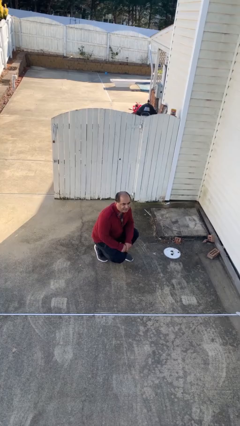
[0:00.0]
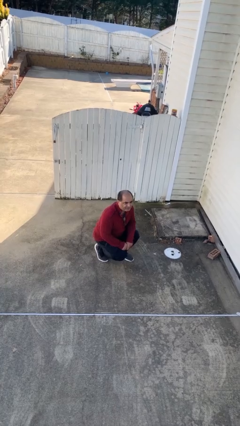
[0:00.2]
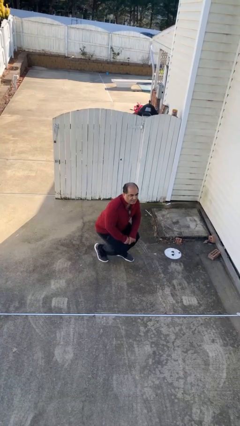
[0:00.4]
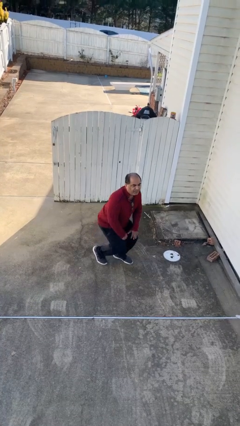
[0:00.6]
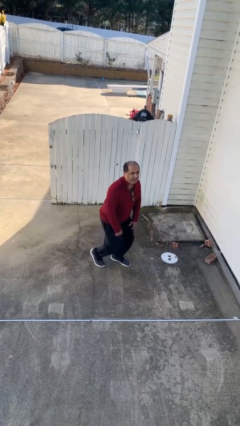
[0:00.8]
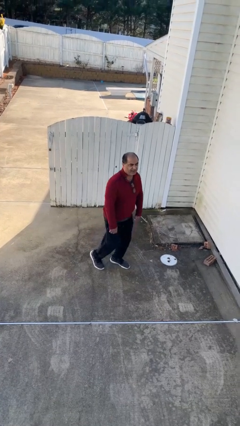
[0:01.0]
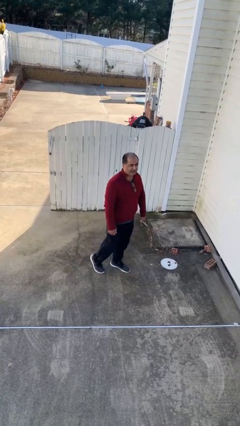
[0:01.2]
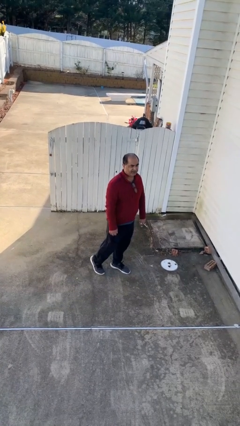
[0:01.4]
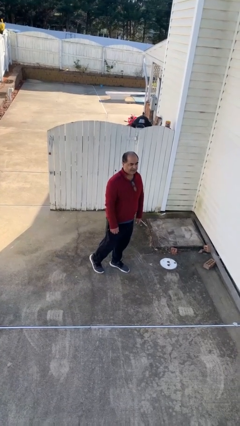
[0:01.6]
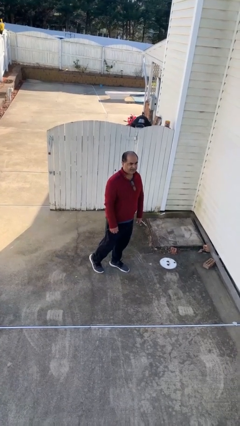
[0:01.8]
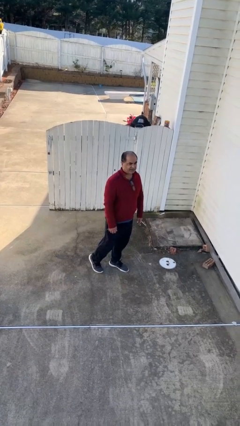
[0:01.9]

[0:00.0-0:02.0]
person stands up

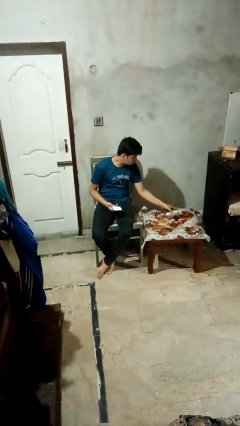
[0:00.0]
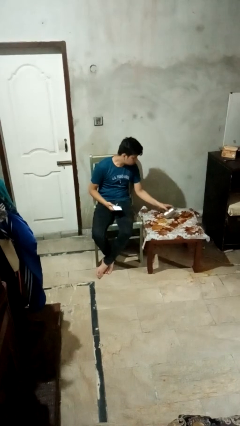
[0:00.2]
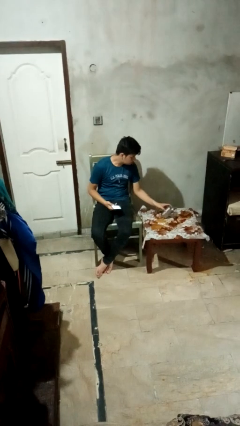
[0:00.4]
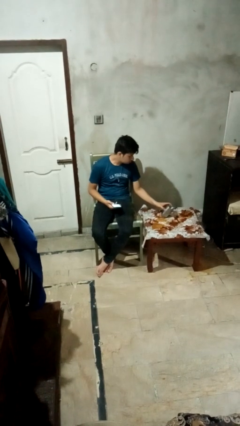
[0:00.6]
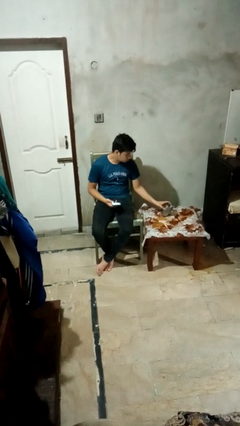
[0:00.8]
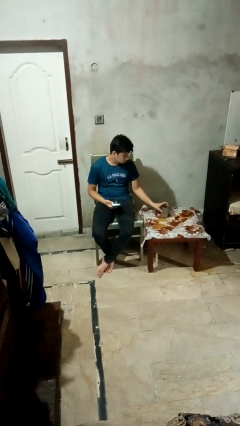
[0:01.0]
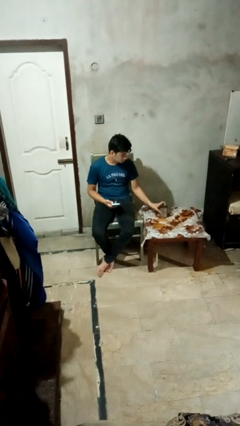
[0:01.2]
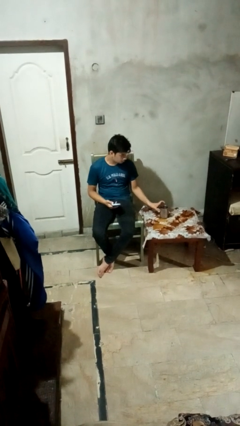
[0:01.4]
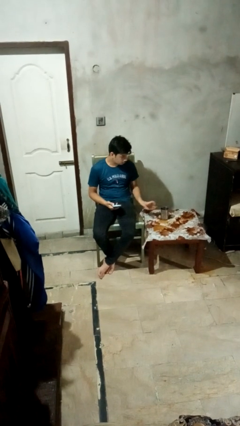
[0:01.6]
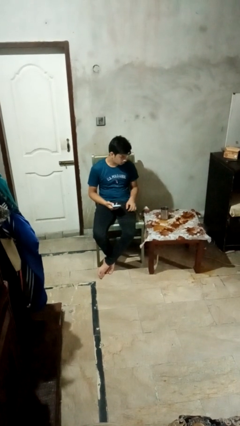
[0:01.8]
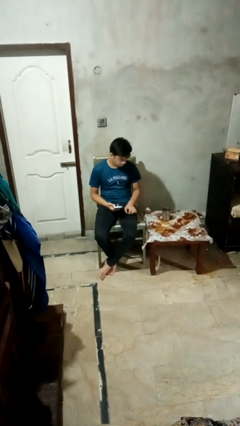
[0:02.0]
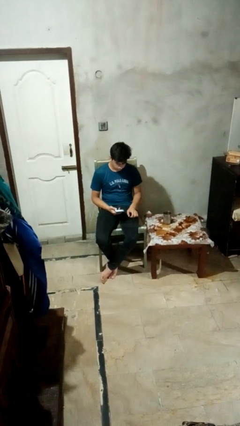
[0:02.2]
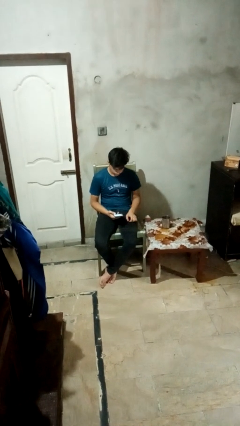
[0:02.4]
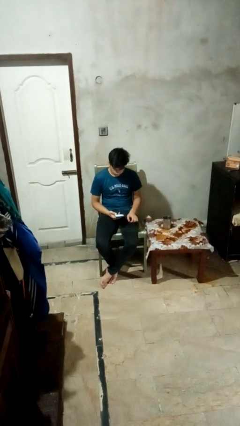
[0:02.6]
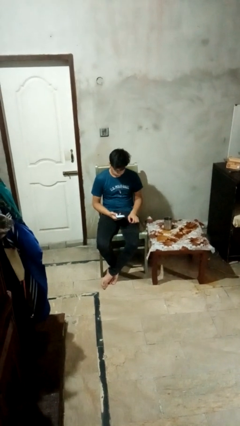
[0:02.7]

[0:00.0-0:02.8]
person sets upright glass

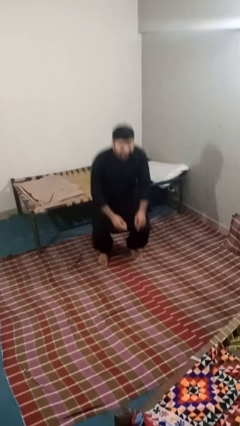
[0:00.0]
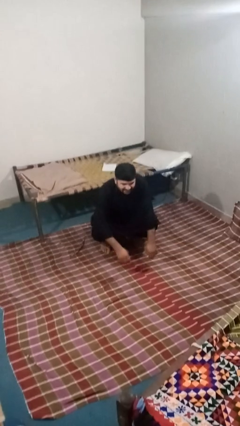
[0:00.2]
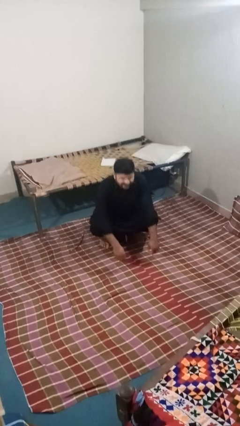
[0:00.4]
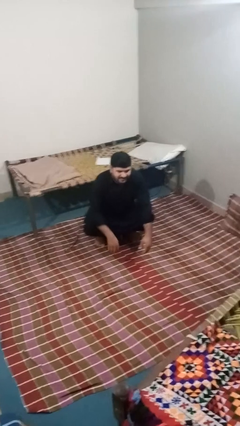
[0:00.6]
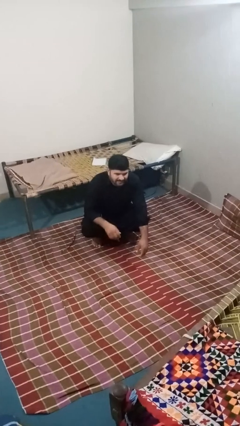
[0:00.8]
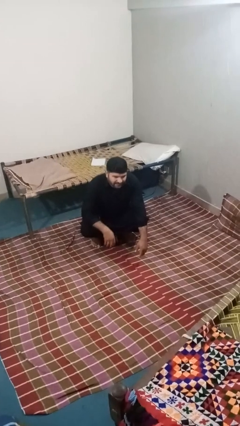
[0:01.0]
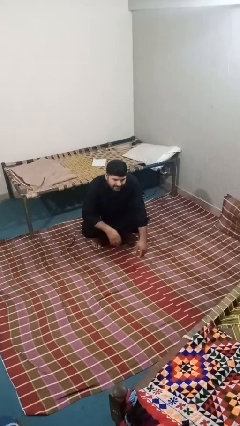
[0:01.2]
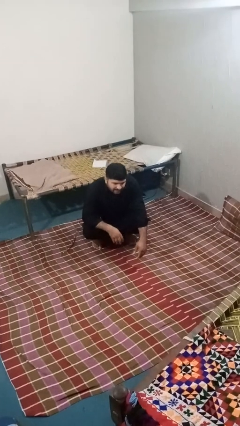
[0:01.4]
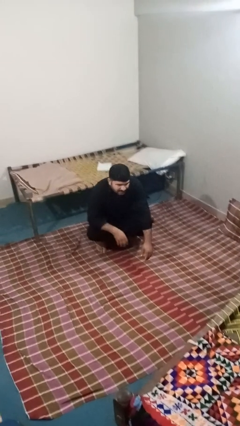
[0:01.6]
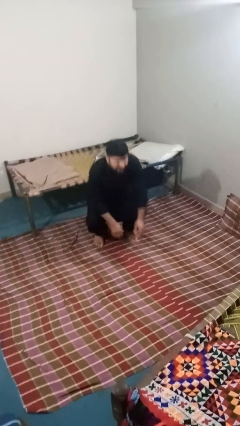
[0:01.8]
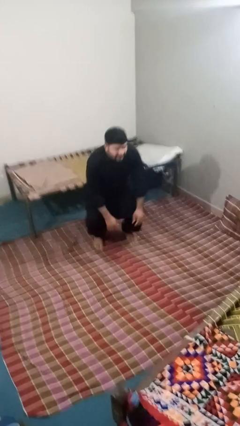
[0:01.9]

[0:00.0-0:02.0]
person squats

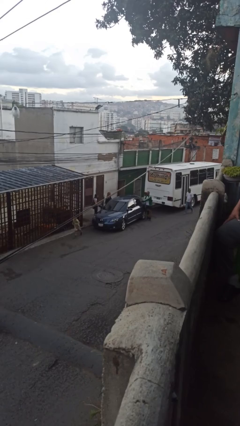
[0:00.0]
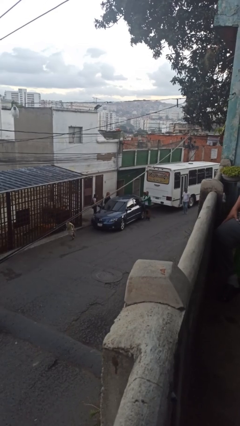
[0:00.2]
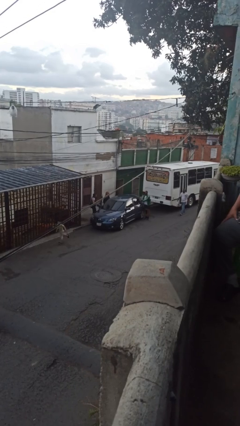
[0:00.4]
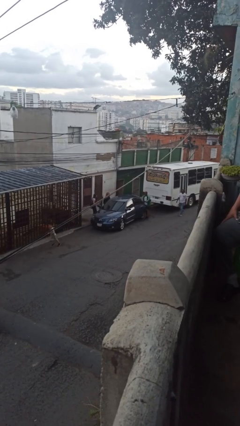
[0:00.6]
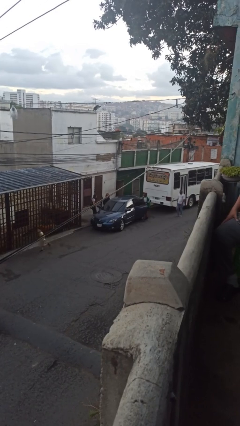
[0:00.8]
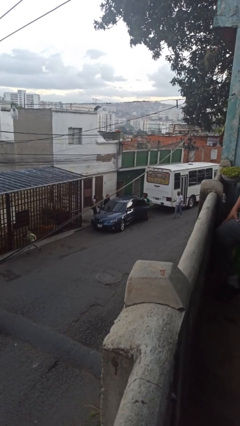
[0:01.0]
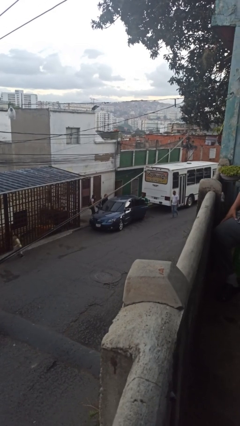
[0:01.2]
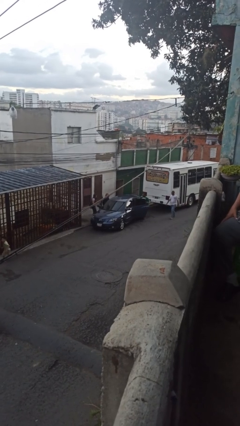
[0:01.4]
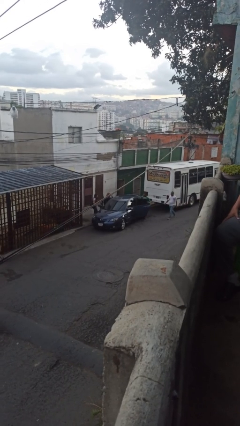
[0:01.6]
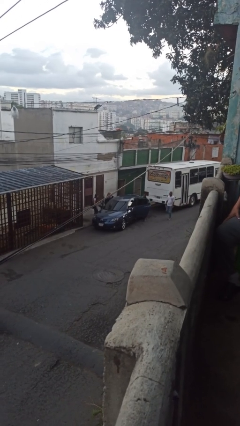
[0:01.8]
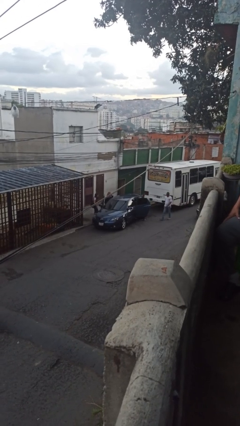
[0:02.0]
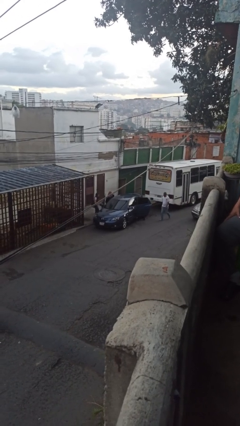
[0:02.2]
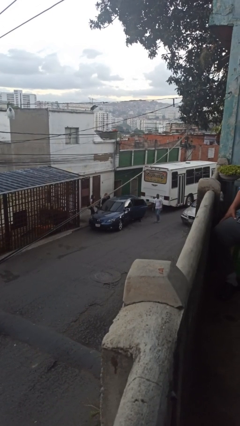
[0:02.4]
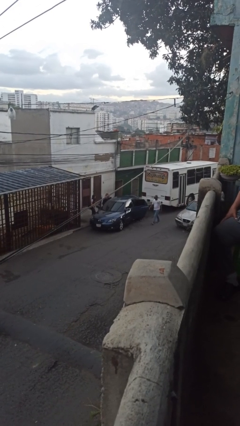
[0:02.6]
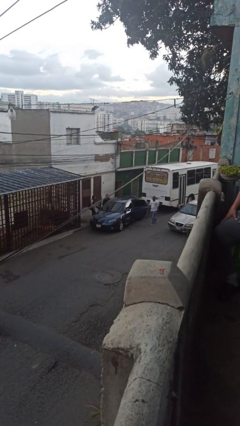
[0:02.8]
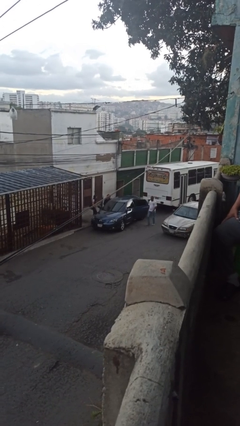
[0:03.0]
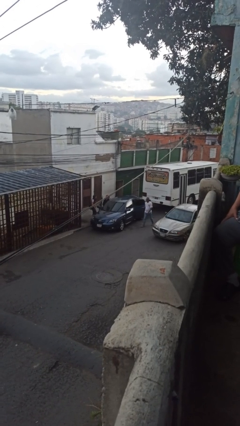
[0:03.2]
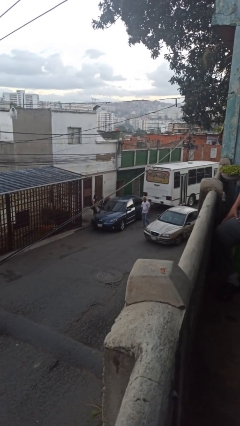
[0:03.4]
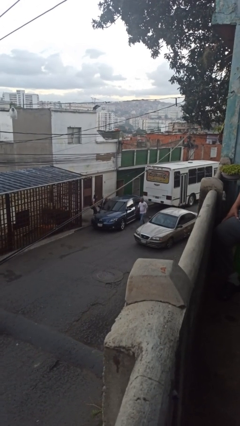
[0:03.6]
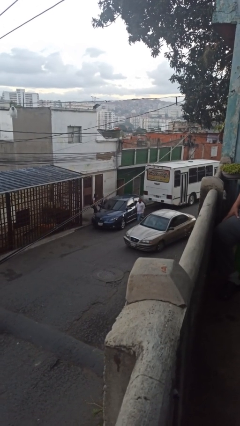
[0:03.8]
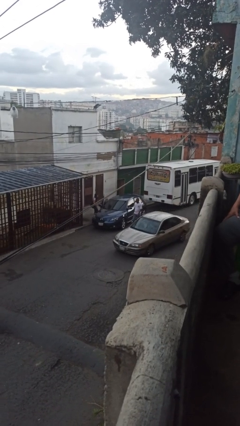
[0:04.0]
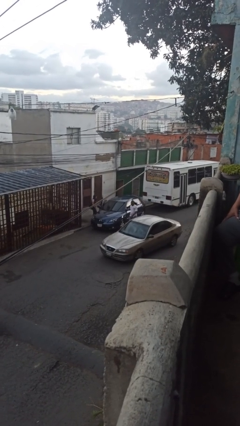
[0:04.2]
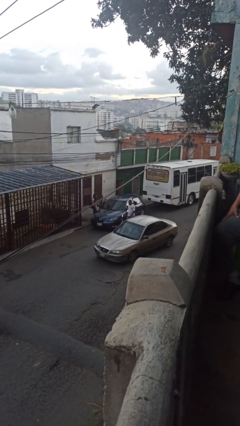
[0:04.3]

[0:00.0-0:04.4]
car picks up person

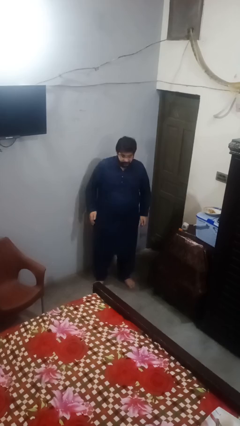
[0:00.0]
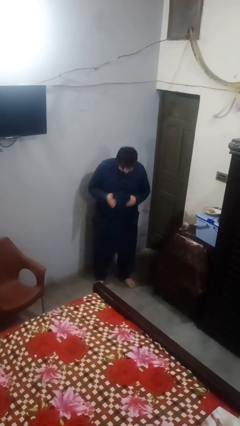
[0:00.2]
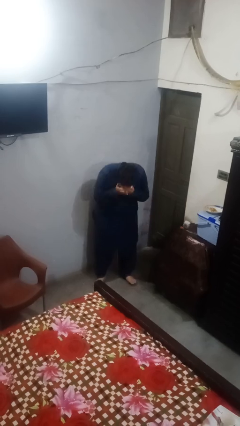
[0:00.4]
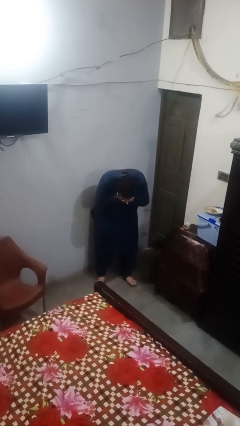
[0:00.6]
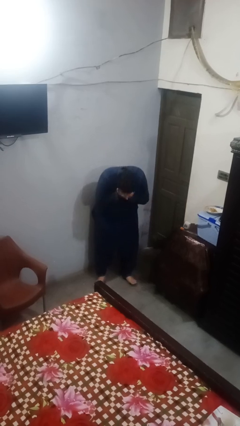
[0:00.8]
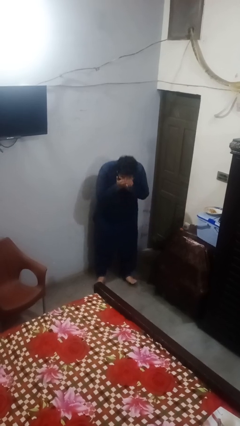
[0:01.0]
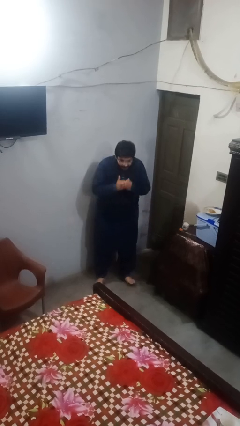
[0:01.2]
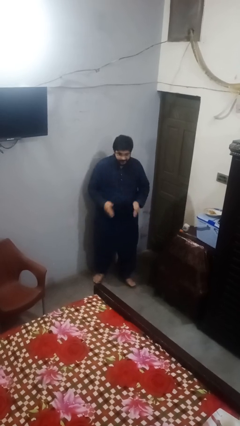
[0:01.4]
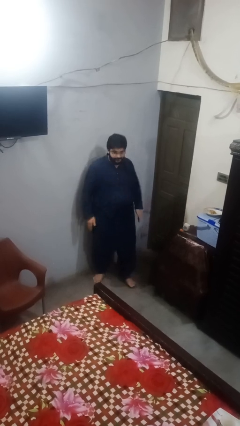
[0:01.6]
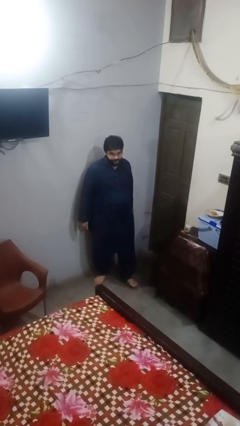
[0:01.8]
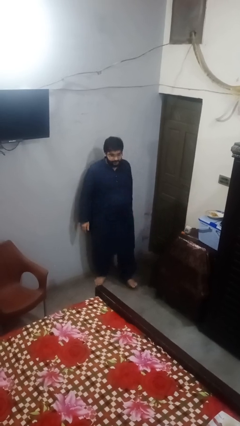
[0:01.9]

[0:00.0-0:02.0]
person sneezes into hand

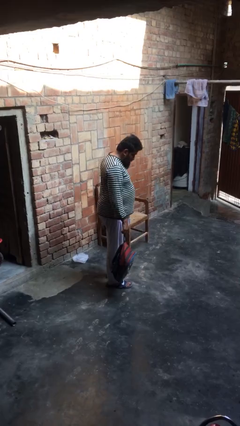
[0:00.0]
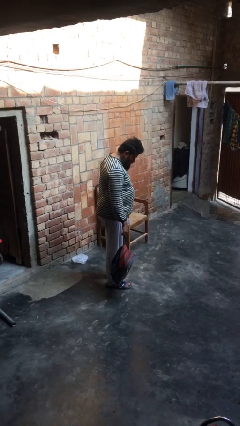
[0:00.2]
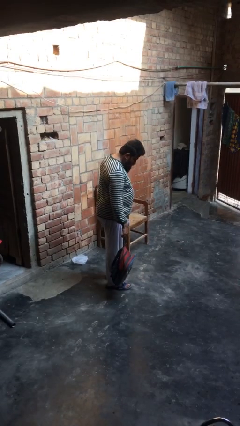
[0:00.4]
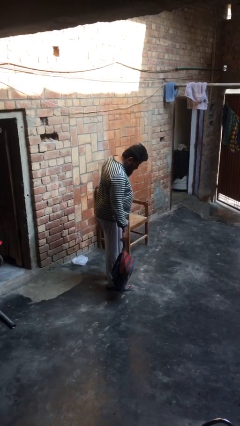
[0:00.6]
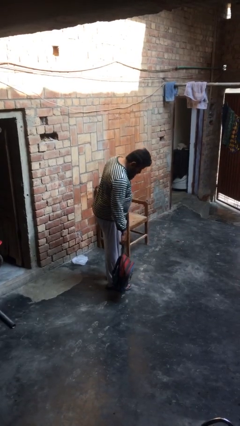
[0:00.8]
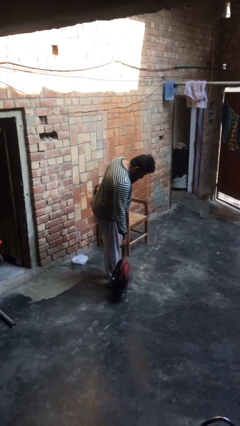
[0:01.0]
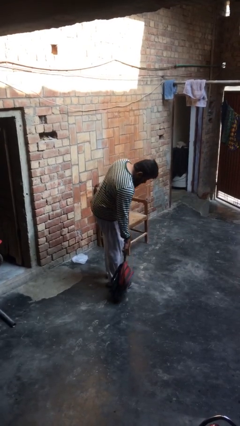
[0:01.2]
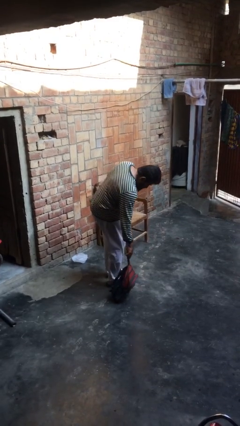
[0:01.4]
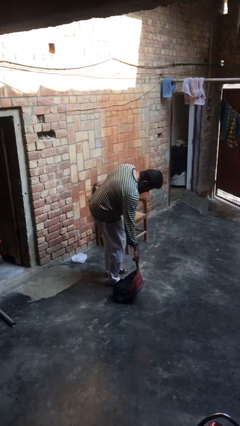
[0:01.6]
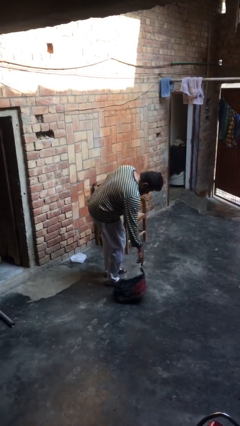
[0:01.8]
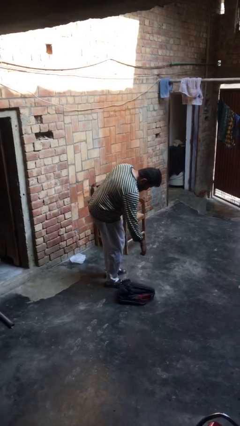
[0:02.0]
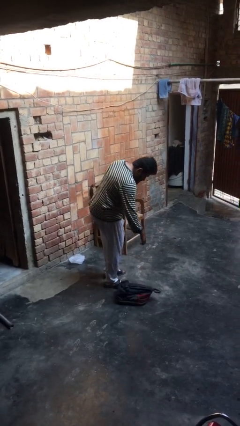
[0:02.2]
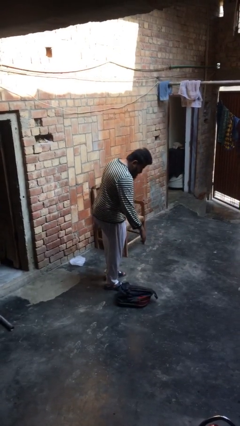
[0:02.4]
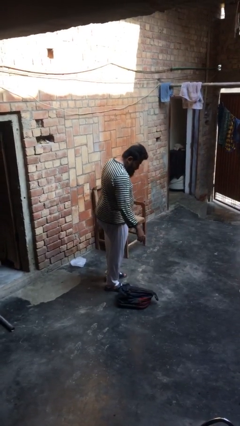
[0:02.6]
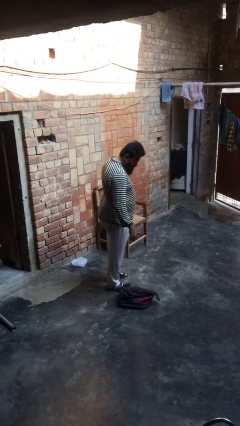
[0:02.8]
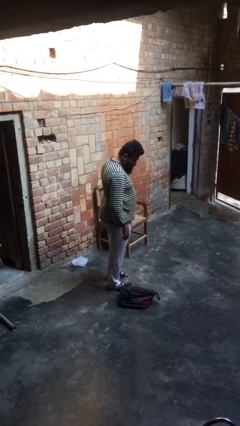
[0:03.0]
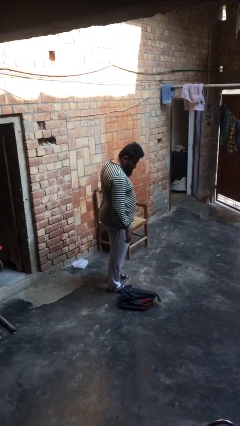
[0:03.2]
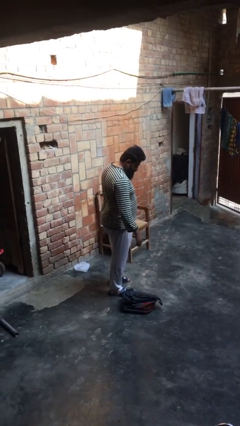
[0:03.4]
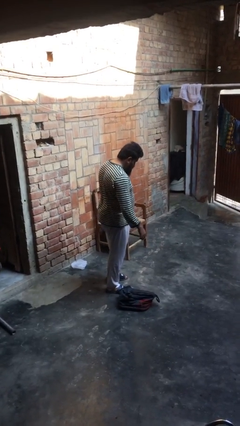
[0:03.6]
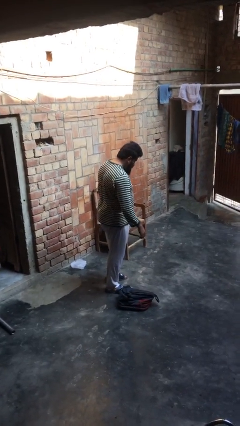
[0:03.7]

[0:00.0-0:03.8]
person puts down object on floor
